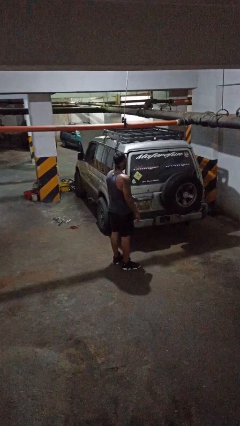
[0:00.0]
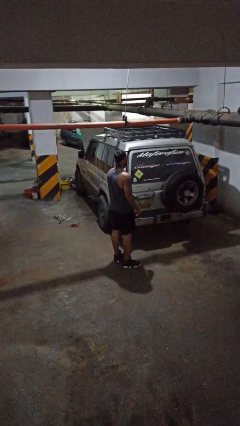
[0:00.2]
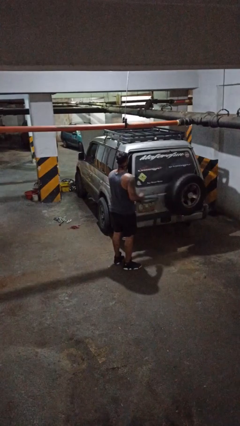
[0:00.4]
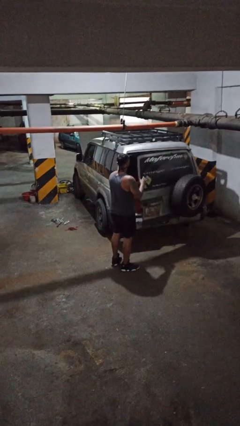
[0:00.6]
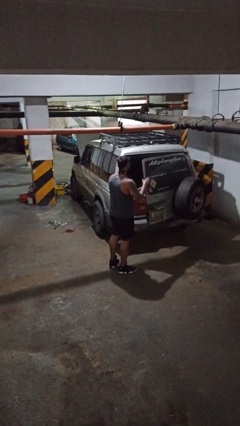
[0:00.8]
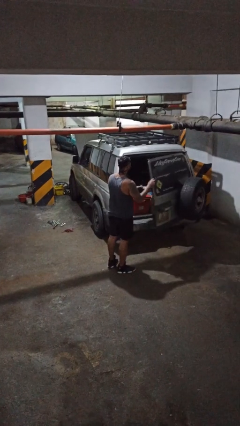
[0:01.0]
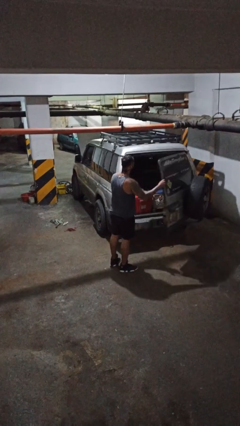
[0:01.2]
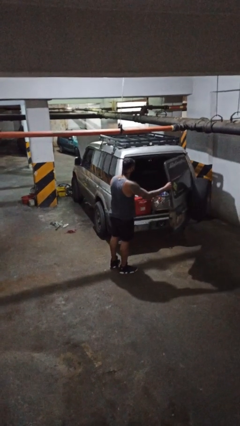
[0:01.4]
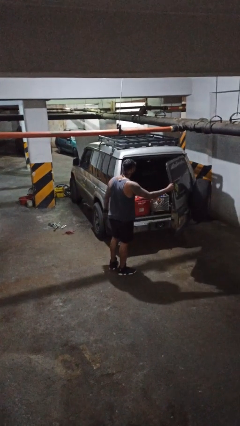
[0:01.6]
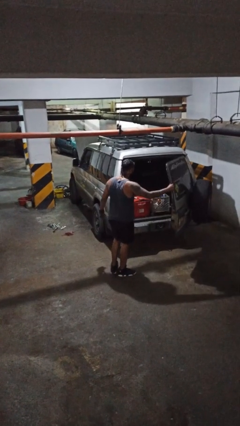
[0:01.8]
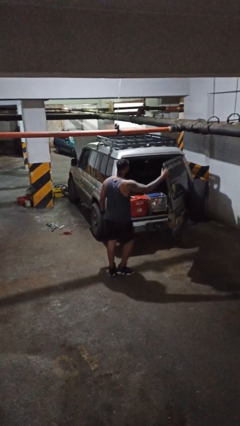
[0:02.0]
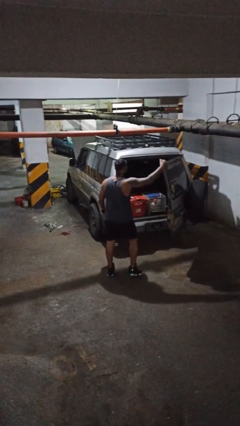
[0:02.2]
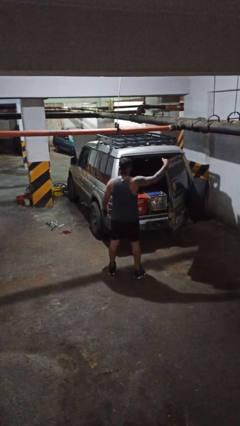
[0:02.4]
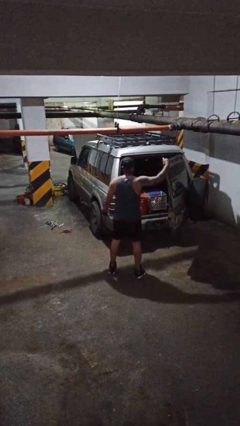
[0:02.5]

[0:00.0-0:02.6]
person opens car trunk

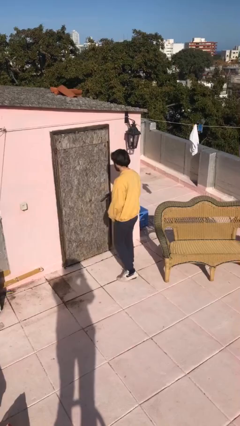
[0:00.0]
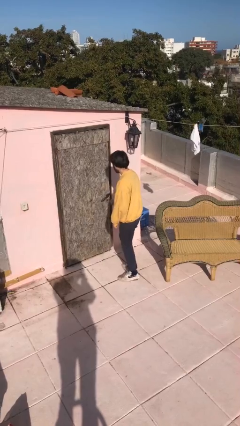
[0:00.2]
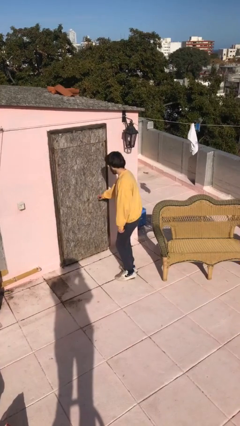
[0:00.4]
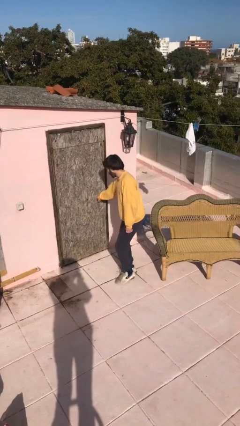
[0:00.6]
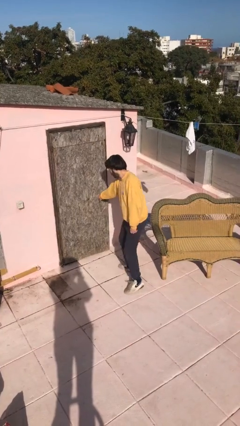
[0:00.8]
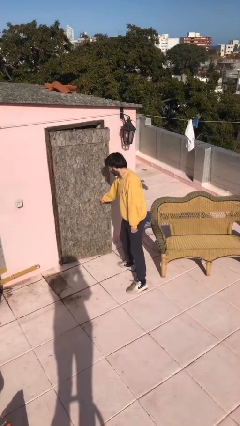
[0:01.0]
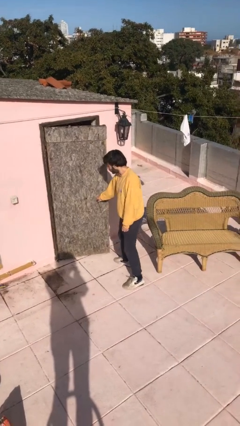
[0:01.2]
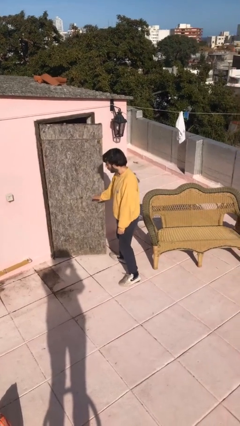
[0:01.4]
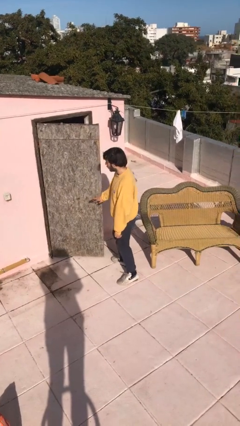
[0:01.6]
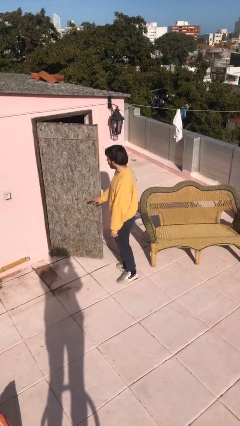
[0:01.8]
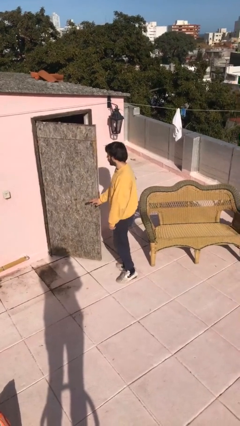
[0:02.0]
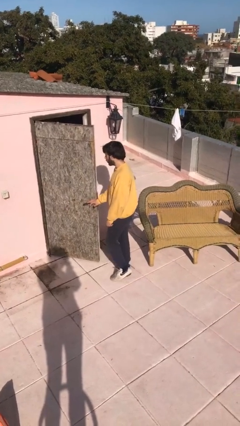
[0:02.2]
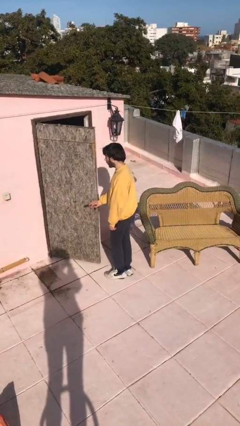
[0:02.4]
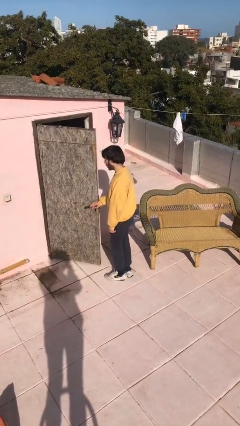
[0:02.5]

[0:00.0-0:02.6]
person opens facility door

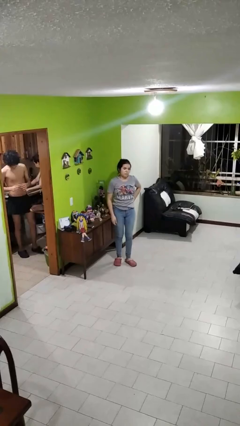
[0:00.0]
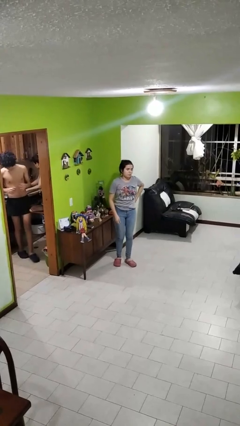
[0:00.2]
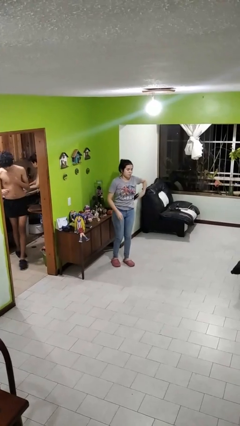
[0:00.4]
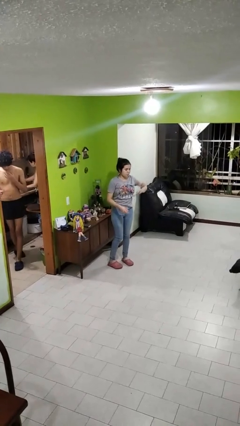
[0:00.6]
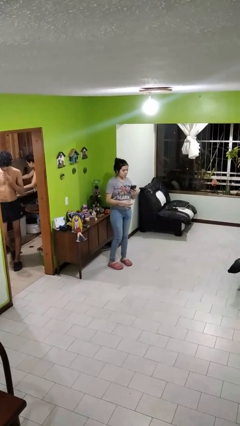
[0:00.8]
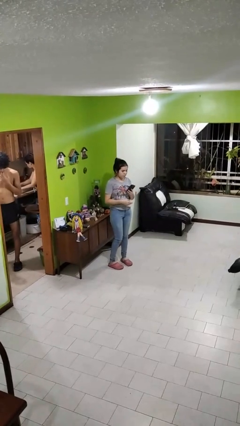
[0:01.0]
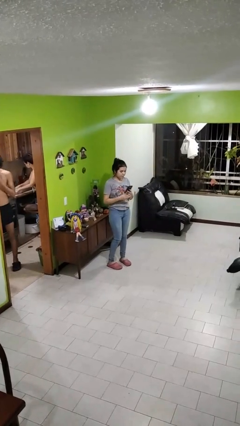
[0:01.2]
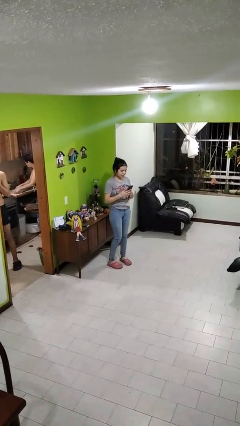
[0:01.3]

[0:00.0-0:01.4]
person takes phone from pocket

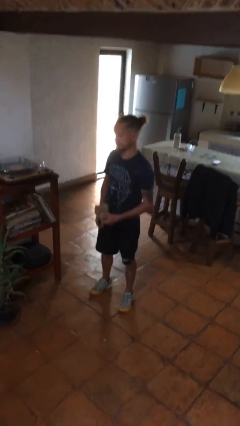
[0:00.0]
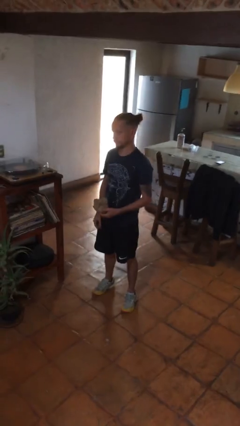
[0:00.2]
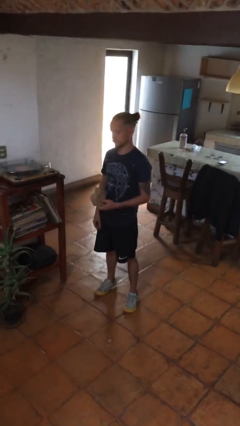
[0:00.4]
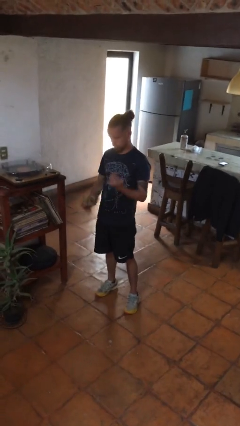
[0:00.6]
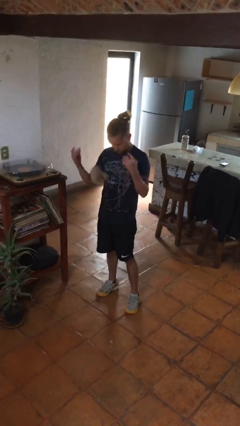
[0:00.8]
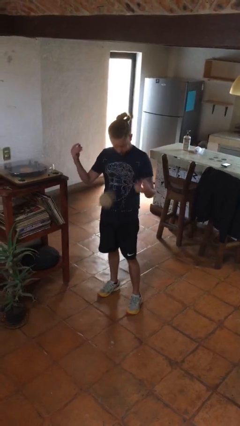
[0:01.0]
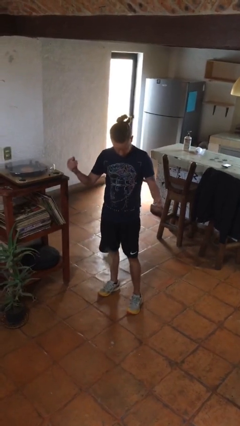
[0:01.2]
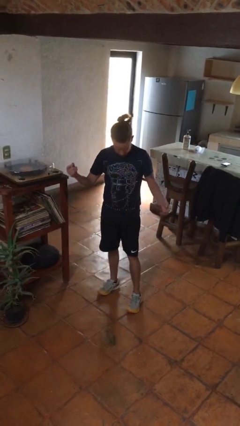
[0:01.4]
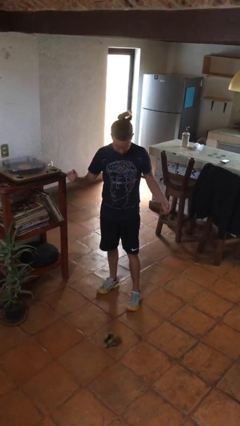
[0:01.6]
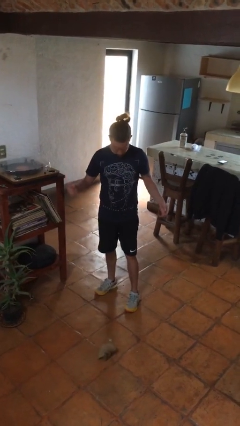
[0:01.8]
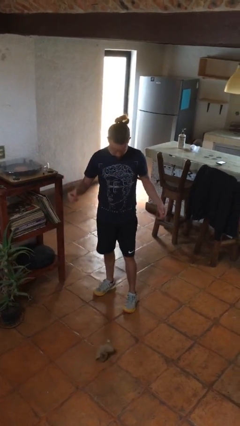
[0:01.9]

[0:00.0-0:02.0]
person drops object

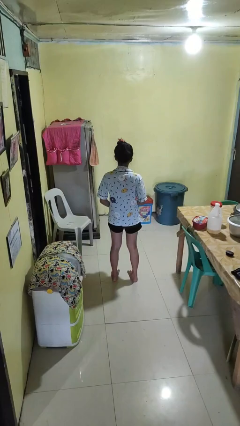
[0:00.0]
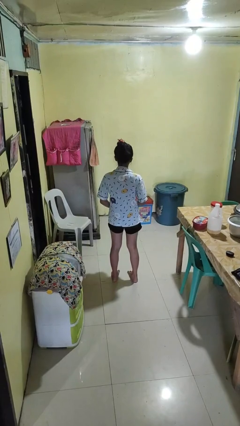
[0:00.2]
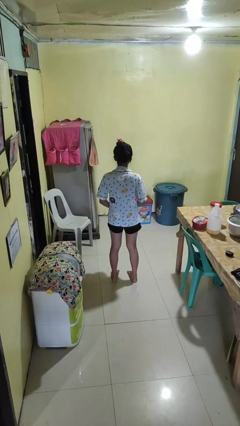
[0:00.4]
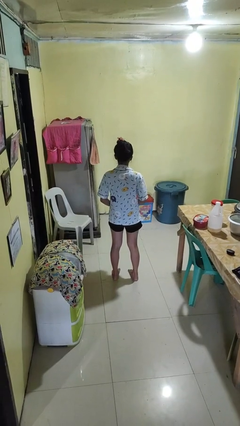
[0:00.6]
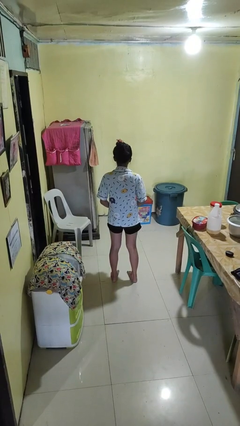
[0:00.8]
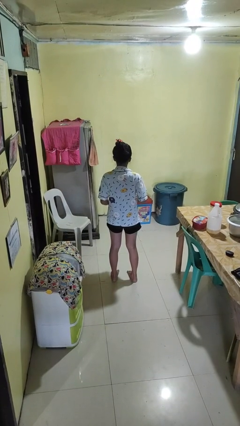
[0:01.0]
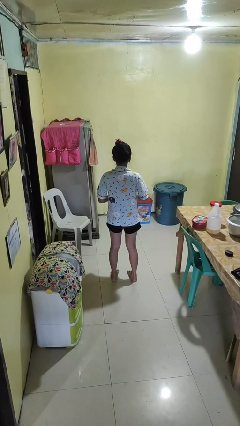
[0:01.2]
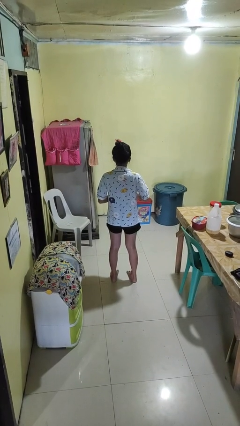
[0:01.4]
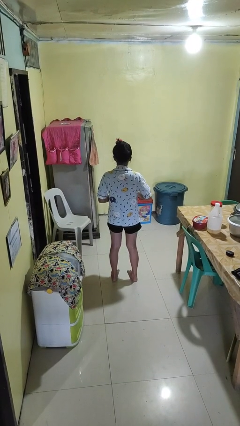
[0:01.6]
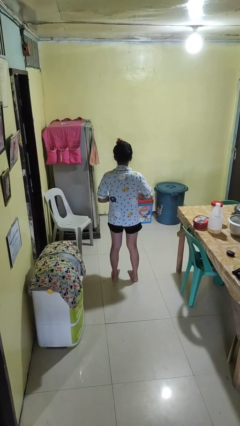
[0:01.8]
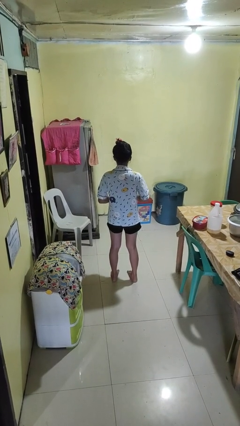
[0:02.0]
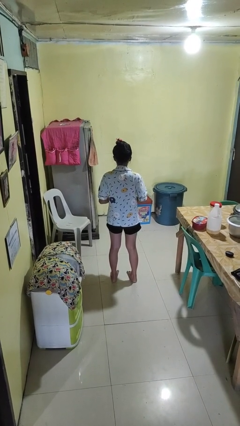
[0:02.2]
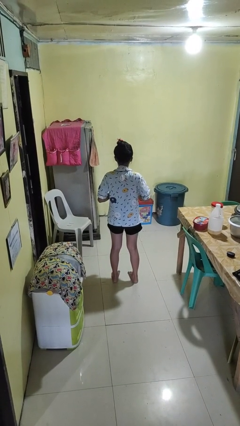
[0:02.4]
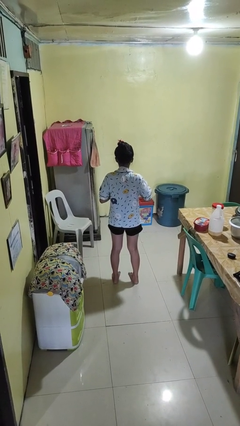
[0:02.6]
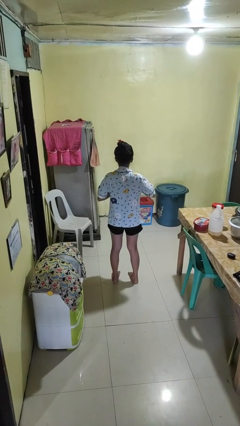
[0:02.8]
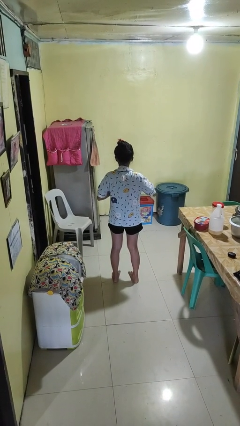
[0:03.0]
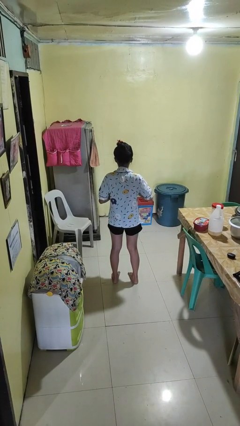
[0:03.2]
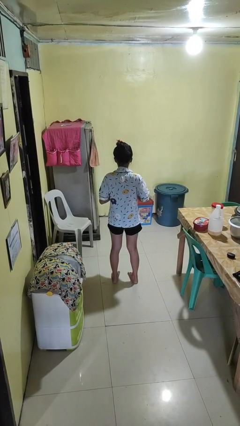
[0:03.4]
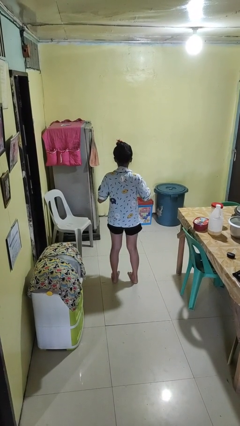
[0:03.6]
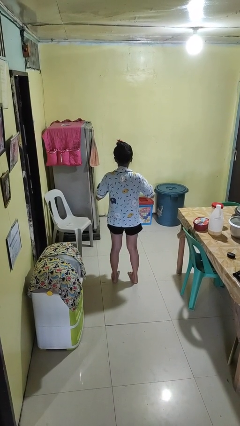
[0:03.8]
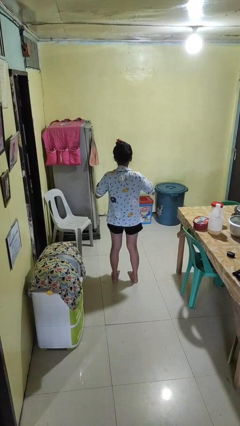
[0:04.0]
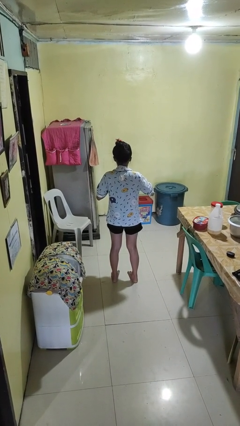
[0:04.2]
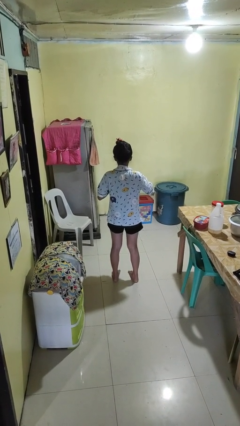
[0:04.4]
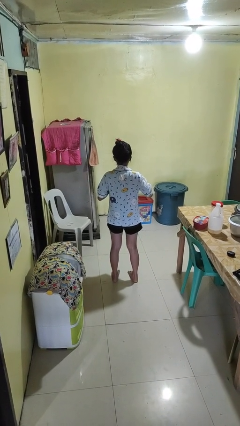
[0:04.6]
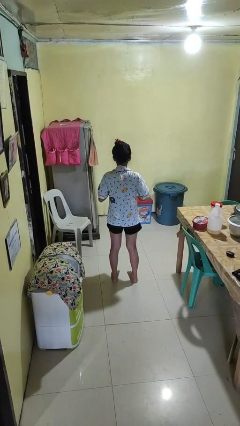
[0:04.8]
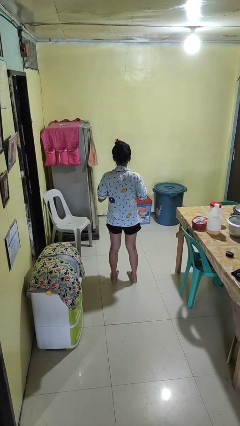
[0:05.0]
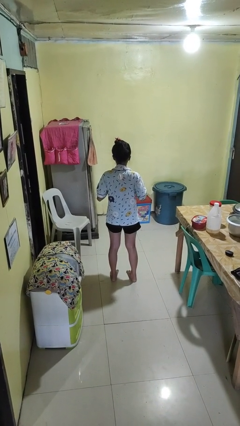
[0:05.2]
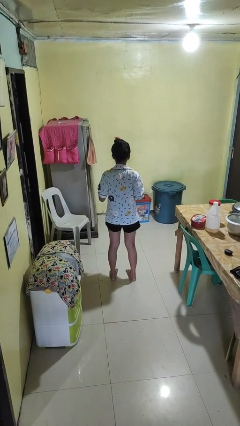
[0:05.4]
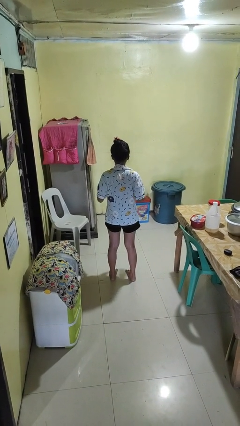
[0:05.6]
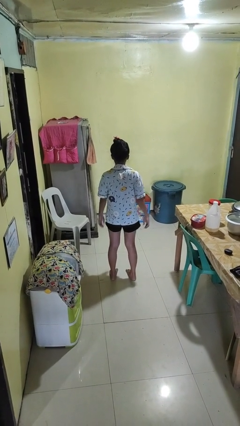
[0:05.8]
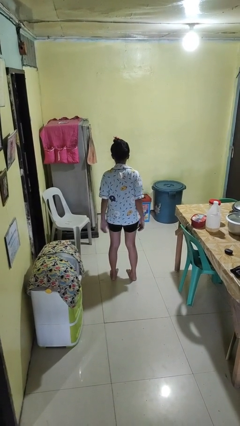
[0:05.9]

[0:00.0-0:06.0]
person unbuttons shirt

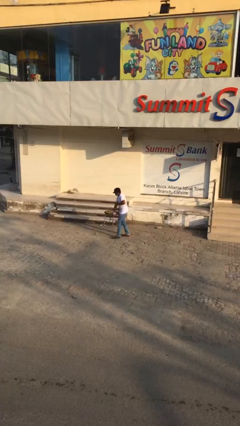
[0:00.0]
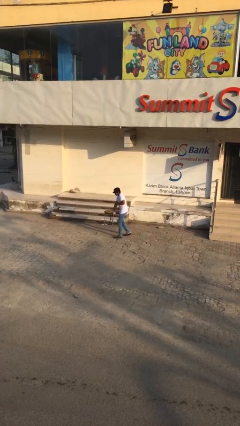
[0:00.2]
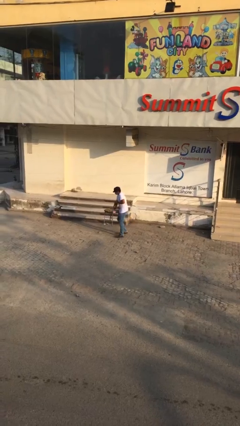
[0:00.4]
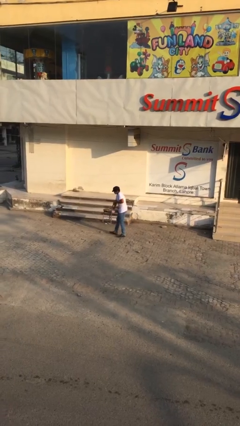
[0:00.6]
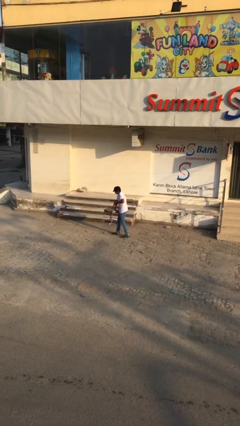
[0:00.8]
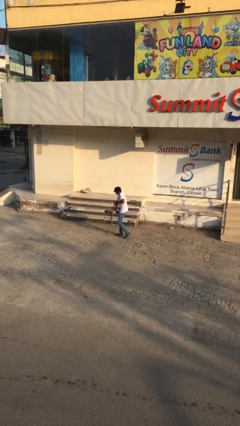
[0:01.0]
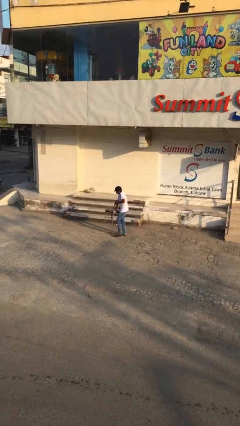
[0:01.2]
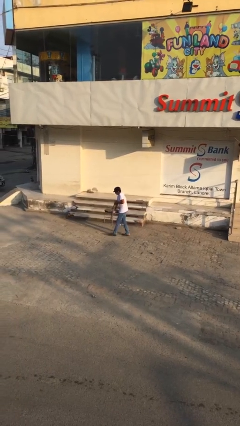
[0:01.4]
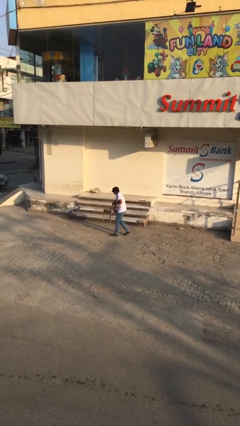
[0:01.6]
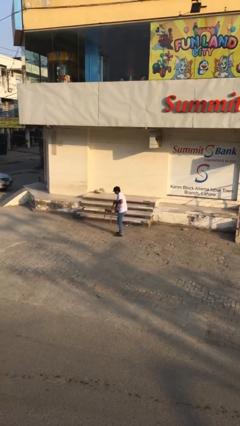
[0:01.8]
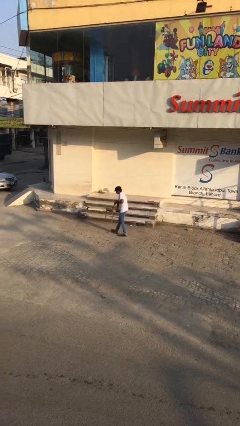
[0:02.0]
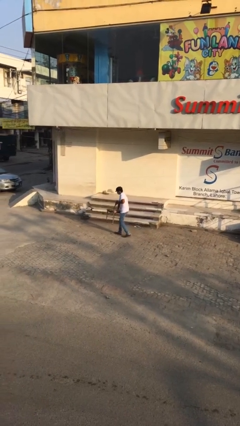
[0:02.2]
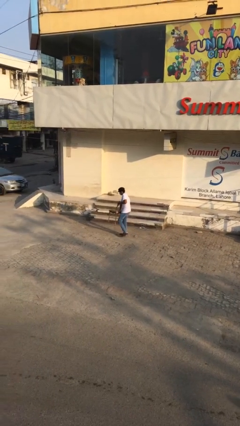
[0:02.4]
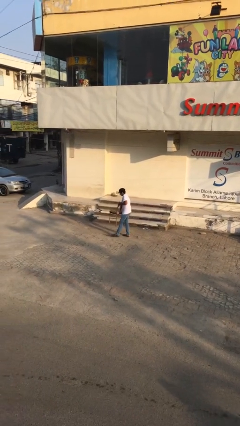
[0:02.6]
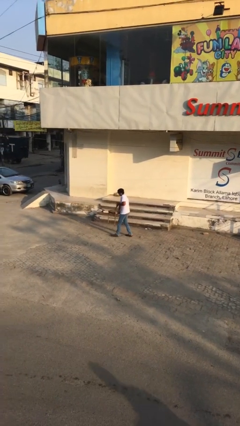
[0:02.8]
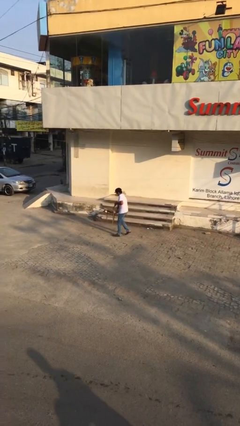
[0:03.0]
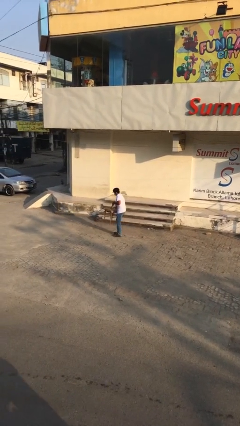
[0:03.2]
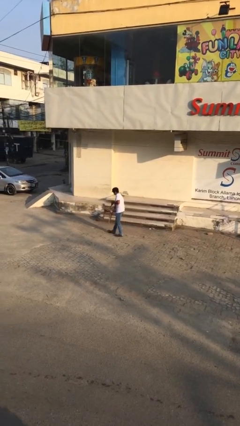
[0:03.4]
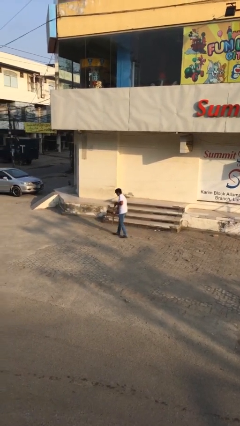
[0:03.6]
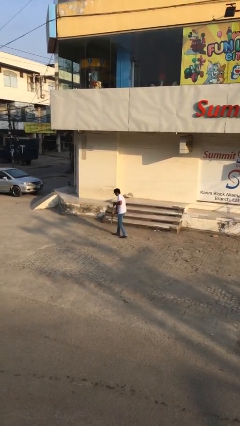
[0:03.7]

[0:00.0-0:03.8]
person carries heavy object
